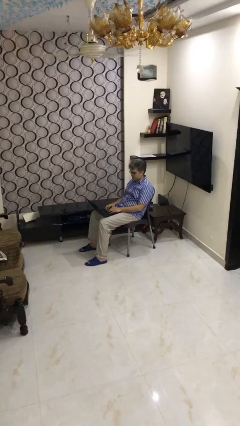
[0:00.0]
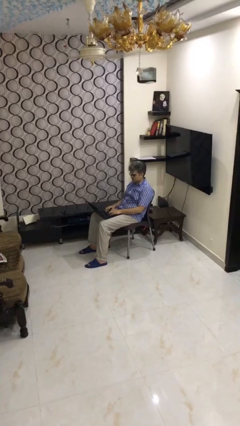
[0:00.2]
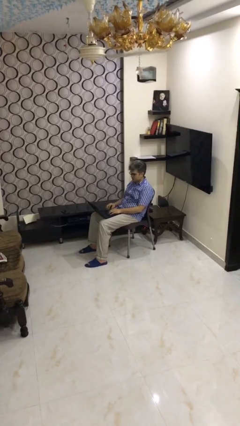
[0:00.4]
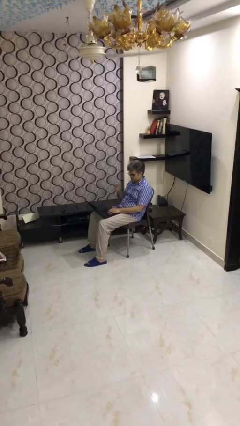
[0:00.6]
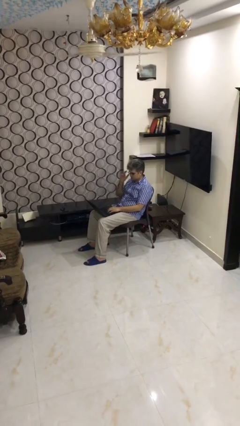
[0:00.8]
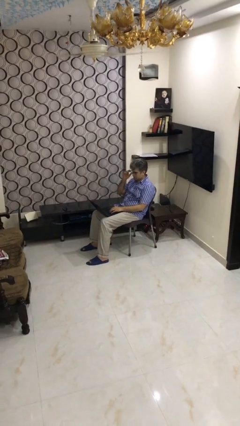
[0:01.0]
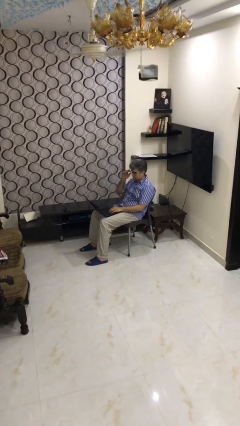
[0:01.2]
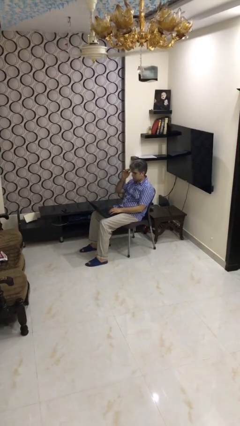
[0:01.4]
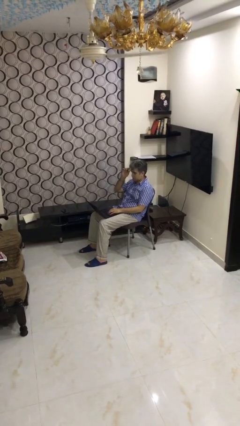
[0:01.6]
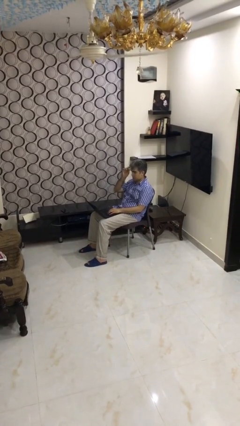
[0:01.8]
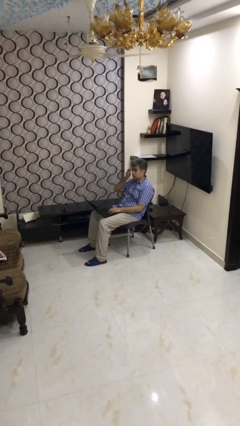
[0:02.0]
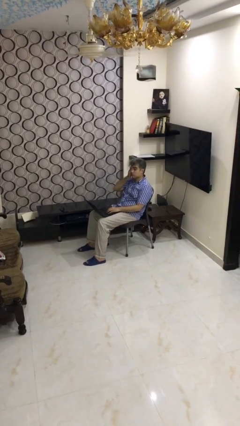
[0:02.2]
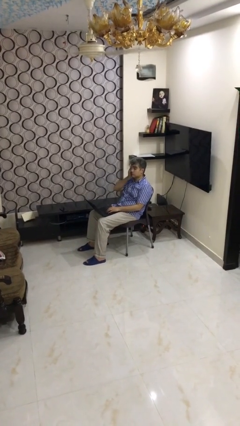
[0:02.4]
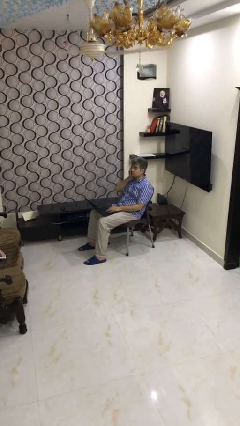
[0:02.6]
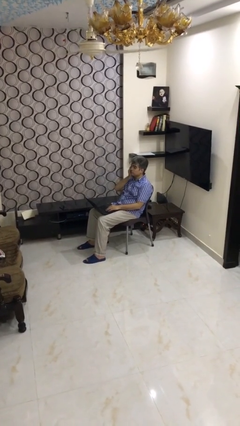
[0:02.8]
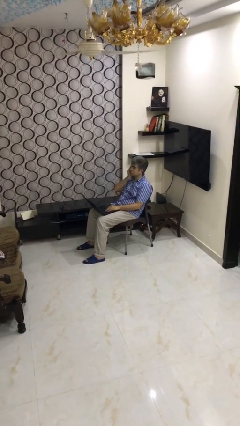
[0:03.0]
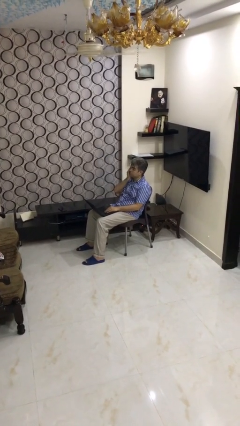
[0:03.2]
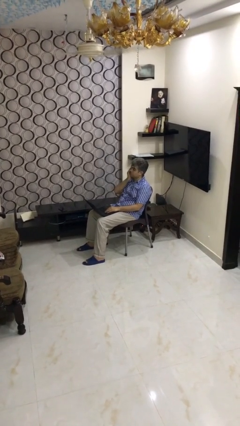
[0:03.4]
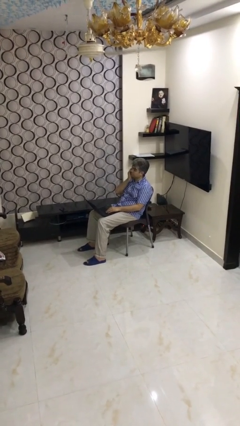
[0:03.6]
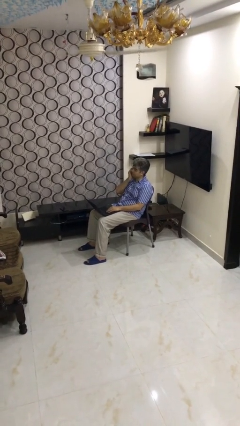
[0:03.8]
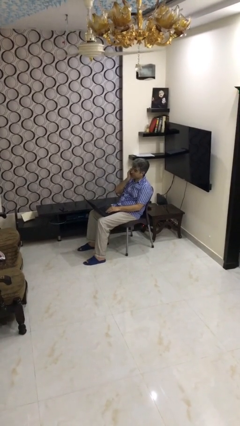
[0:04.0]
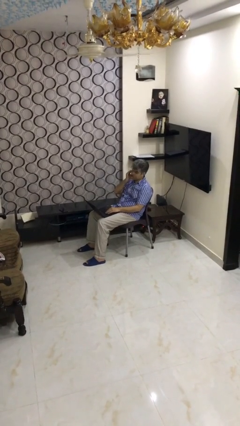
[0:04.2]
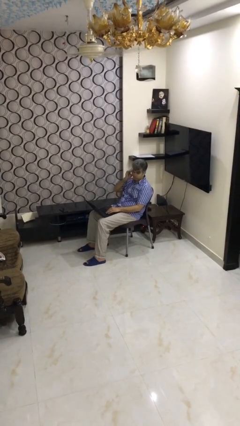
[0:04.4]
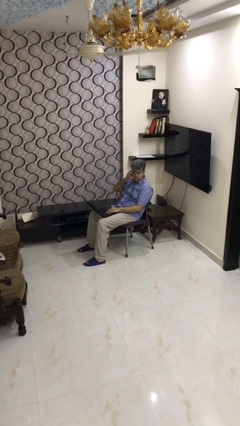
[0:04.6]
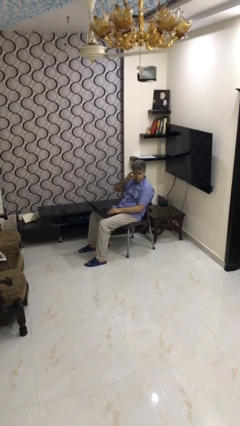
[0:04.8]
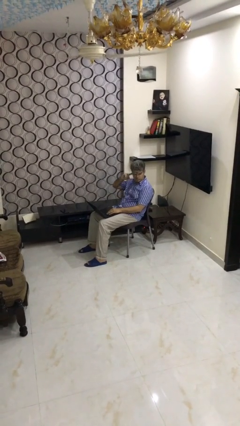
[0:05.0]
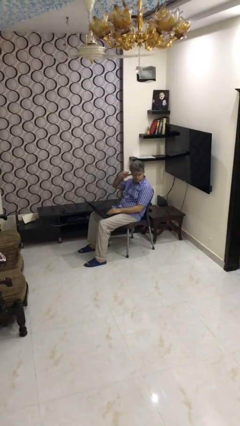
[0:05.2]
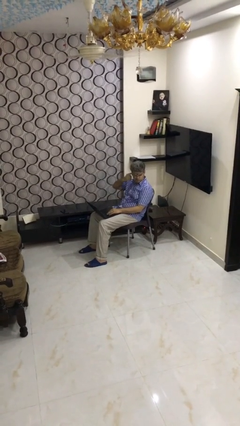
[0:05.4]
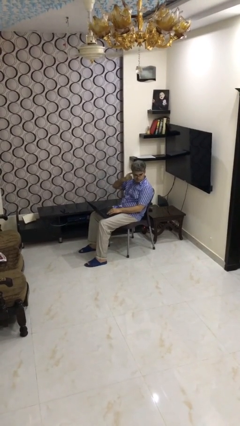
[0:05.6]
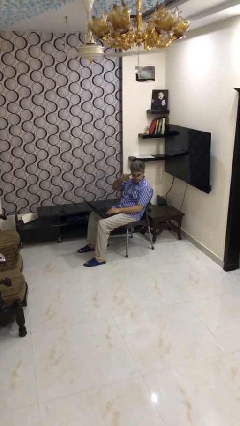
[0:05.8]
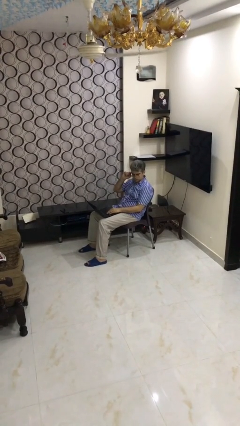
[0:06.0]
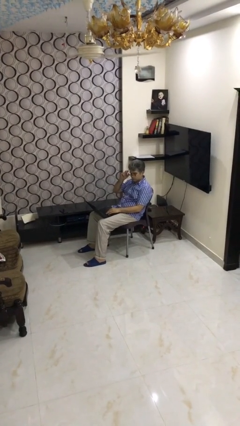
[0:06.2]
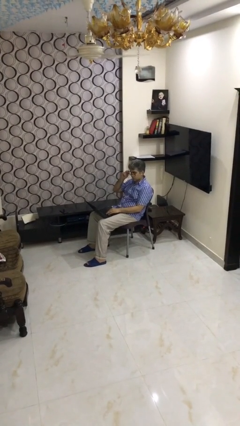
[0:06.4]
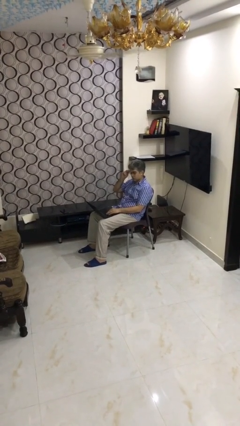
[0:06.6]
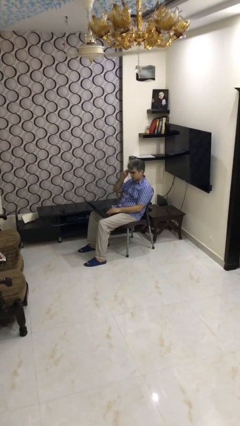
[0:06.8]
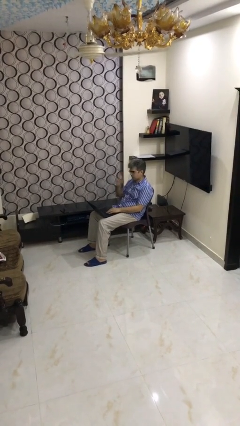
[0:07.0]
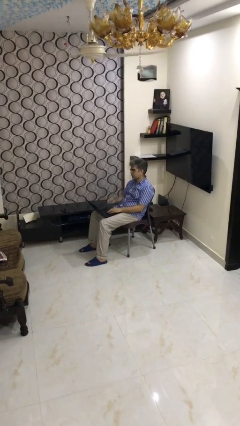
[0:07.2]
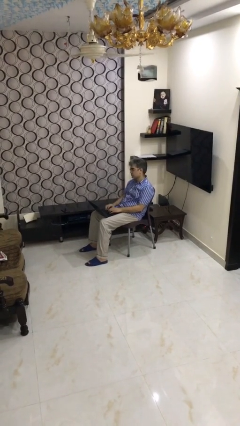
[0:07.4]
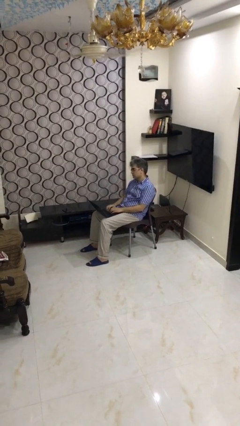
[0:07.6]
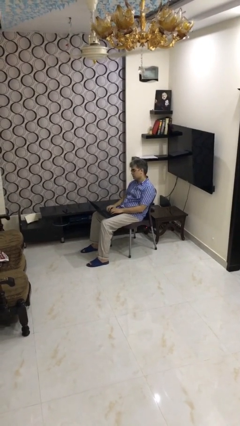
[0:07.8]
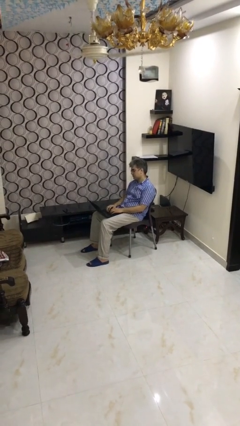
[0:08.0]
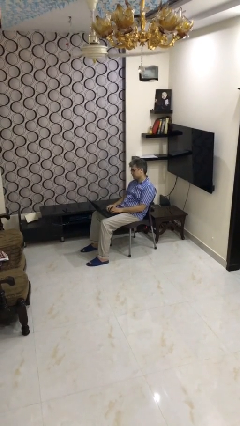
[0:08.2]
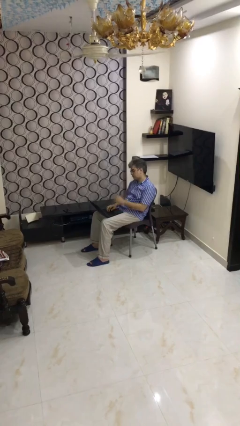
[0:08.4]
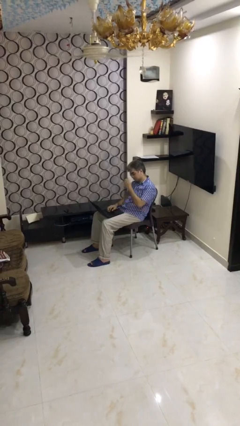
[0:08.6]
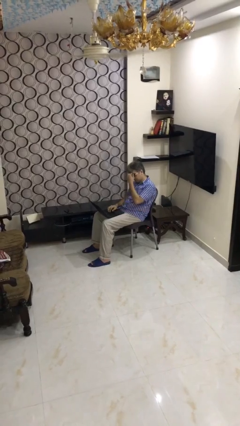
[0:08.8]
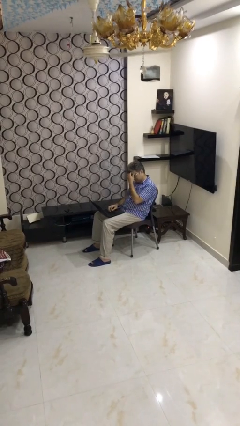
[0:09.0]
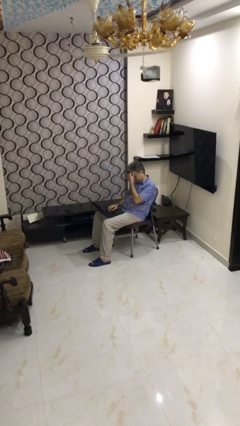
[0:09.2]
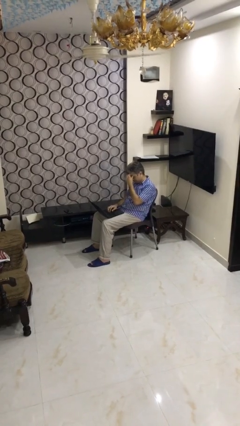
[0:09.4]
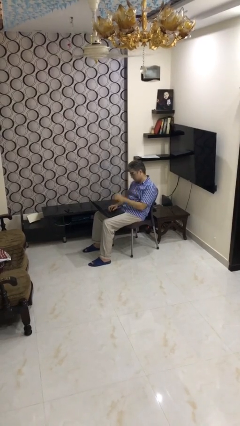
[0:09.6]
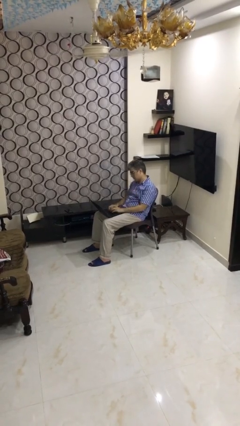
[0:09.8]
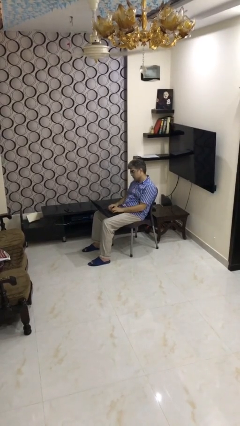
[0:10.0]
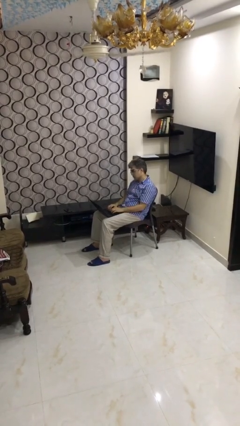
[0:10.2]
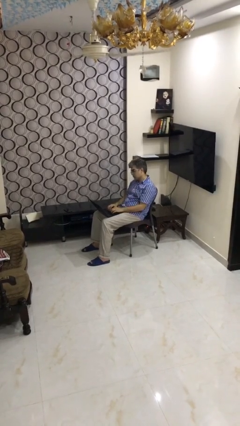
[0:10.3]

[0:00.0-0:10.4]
person interacts with laptop

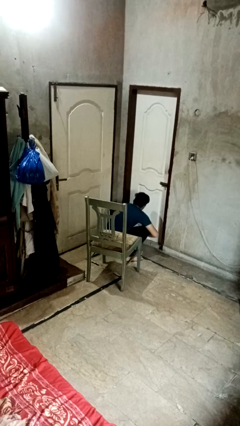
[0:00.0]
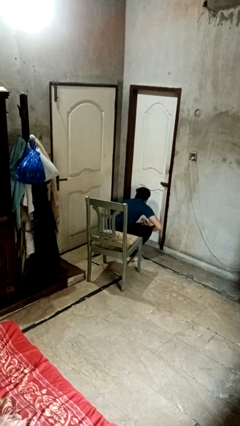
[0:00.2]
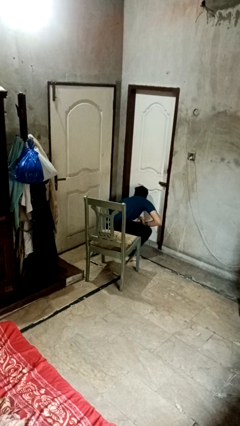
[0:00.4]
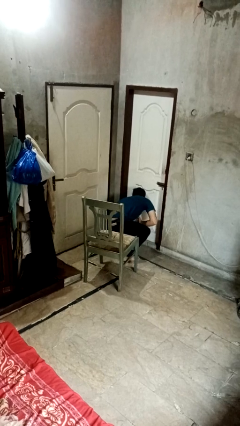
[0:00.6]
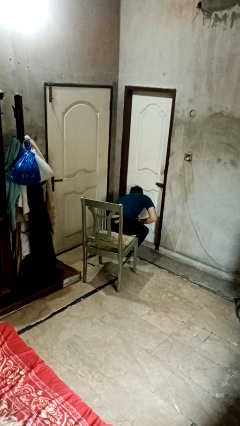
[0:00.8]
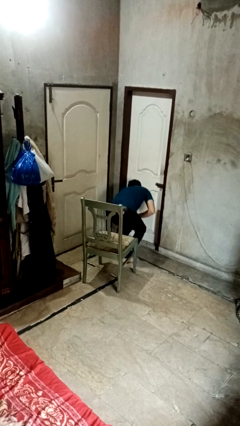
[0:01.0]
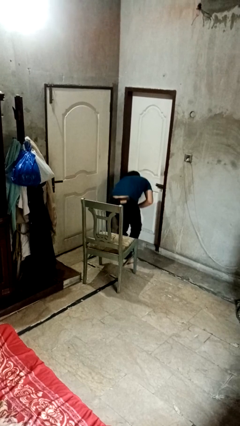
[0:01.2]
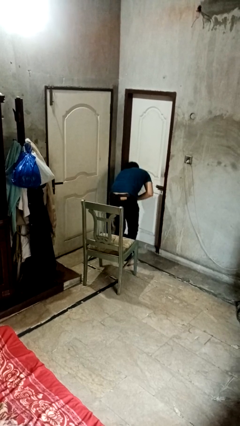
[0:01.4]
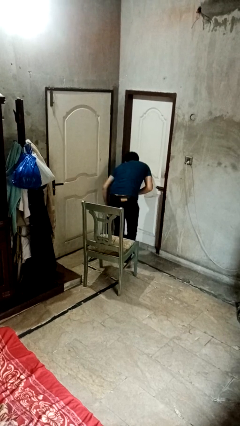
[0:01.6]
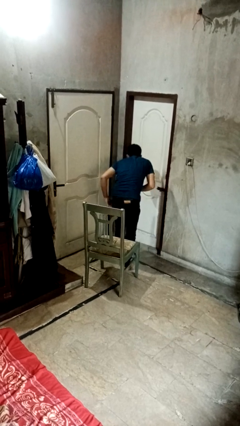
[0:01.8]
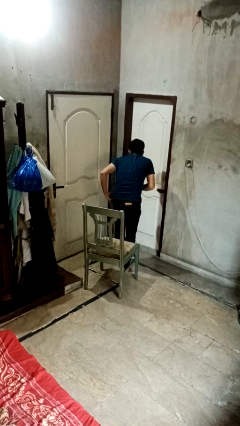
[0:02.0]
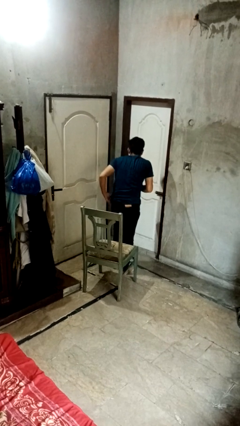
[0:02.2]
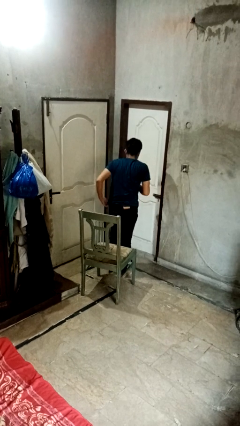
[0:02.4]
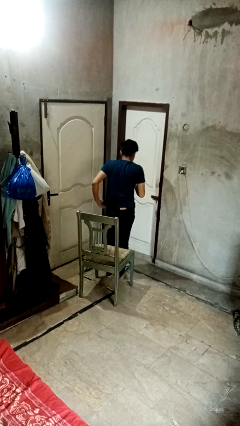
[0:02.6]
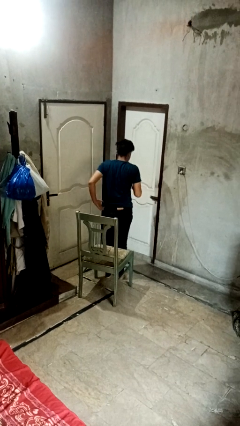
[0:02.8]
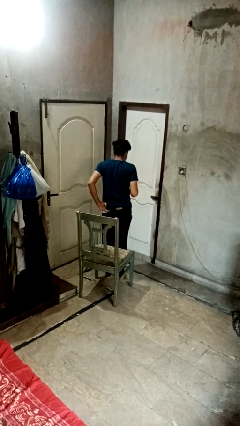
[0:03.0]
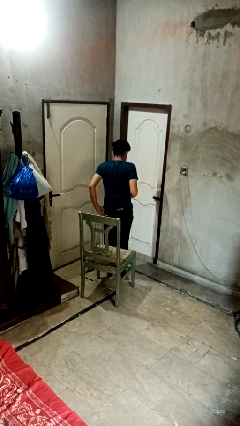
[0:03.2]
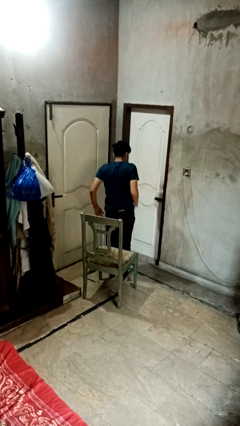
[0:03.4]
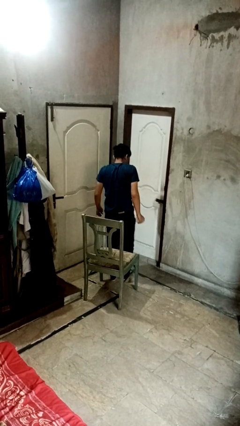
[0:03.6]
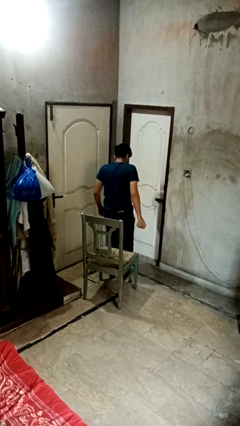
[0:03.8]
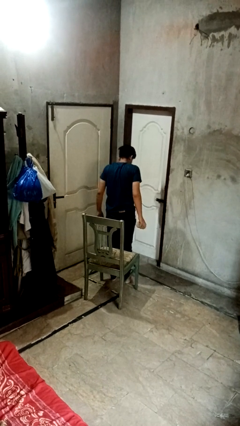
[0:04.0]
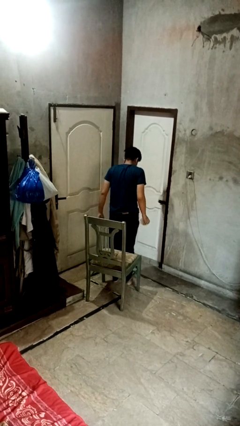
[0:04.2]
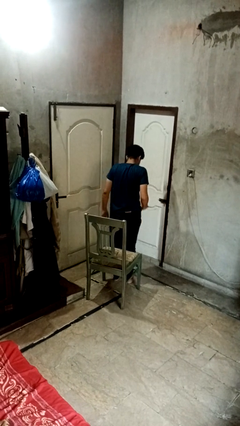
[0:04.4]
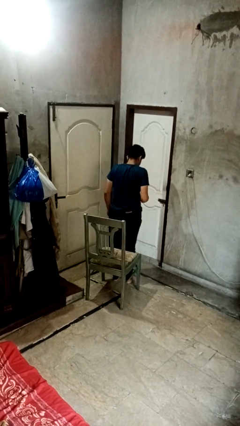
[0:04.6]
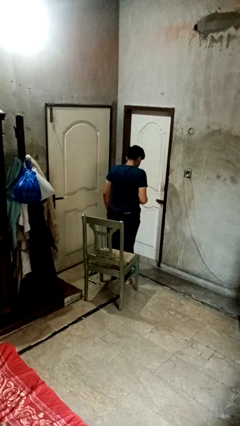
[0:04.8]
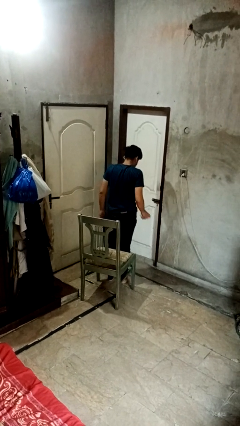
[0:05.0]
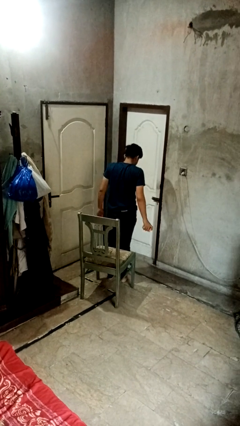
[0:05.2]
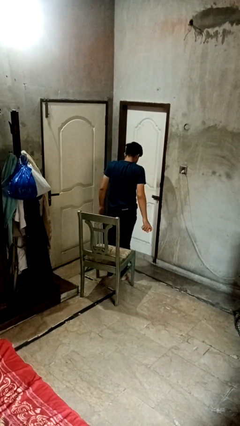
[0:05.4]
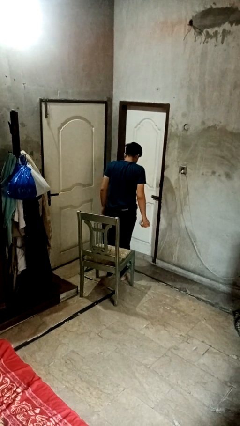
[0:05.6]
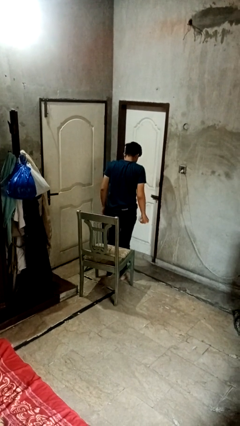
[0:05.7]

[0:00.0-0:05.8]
person stands up from floor

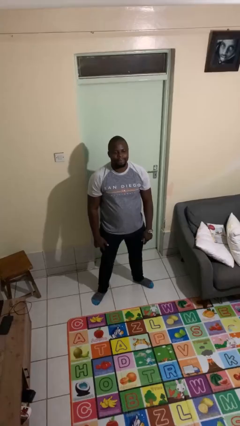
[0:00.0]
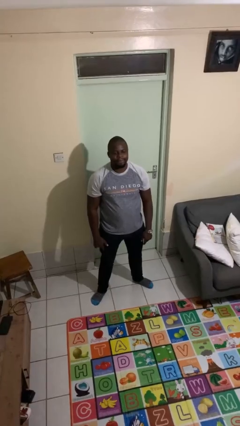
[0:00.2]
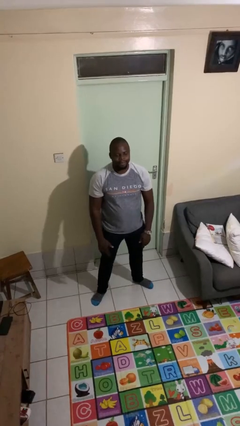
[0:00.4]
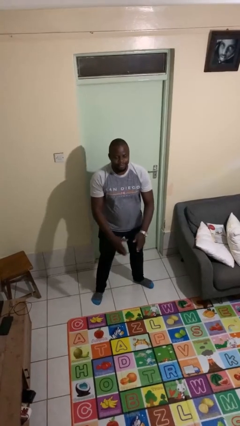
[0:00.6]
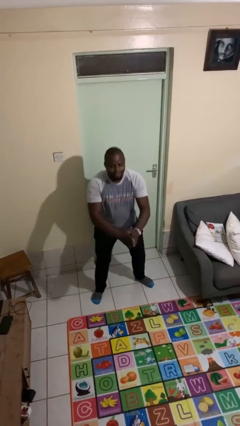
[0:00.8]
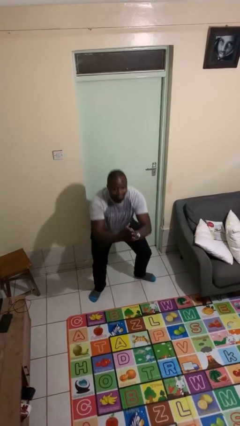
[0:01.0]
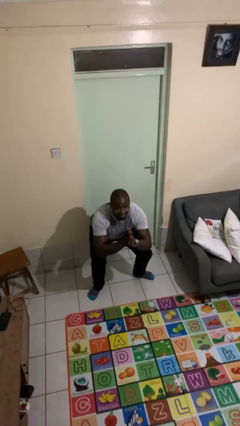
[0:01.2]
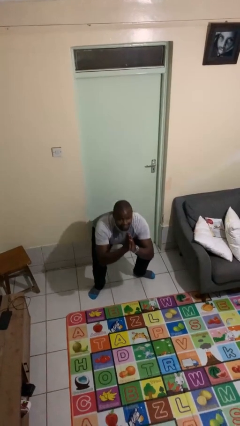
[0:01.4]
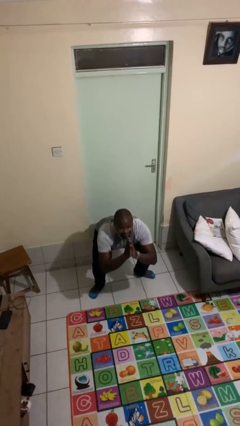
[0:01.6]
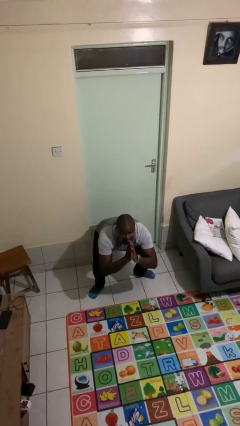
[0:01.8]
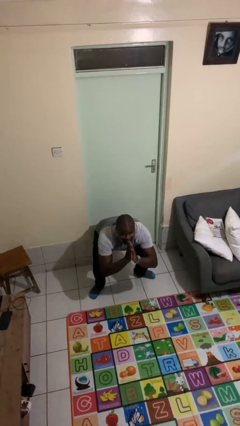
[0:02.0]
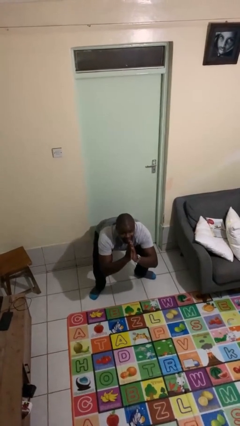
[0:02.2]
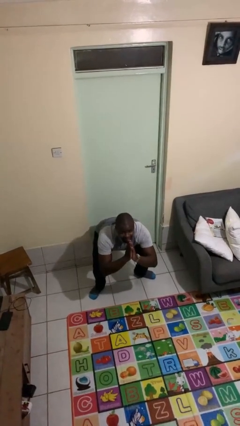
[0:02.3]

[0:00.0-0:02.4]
person squats
